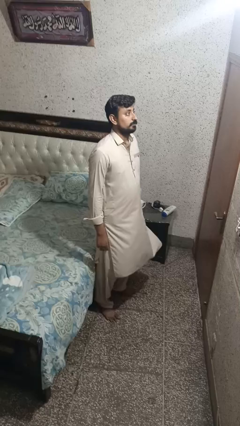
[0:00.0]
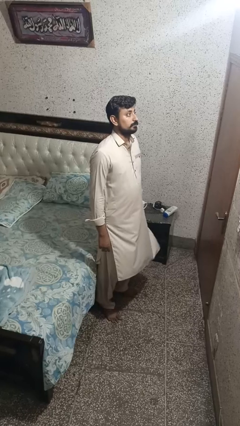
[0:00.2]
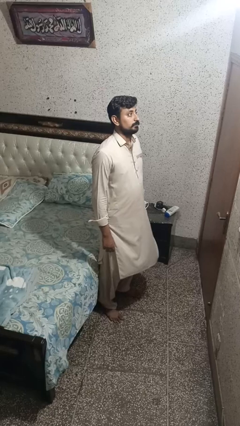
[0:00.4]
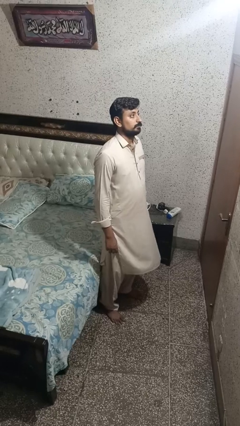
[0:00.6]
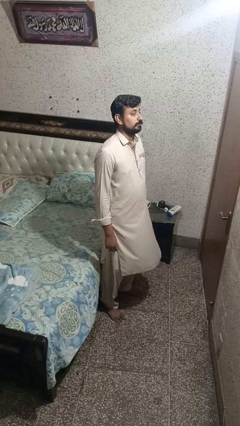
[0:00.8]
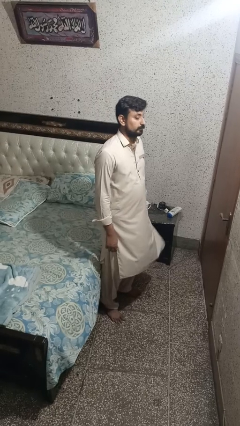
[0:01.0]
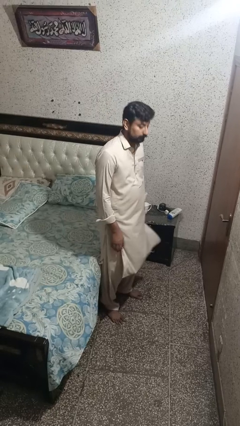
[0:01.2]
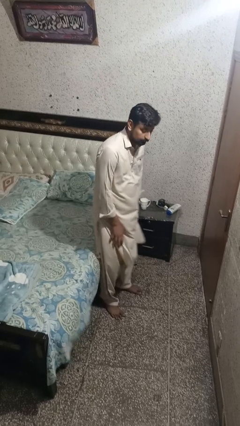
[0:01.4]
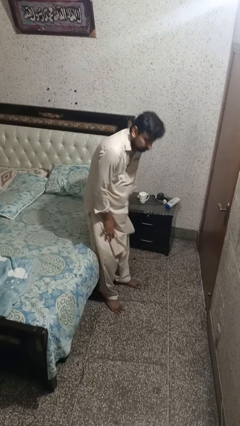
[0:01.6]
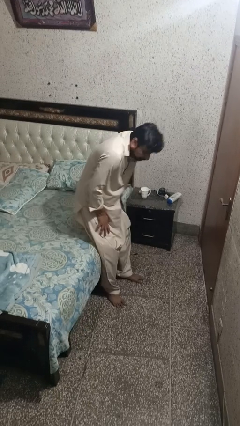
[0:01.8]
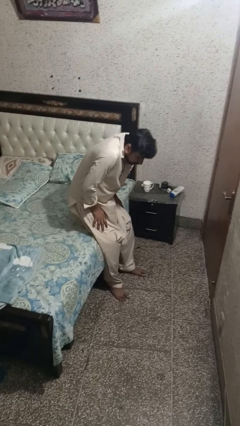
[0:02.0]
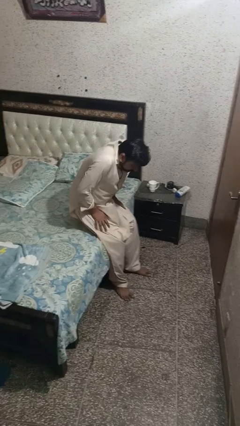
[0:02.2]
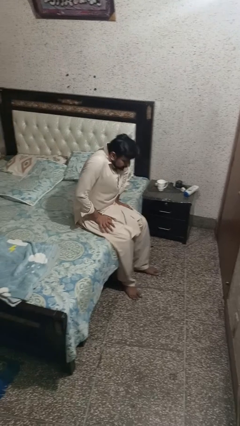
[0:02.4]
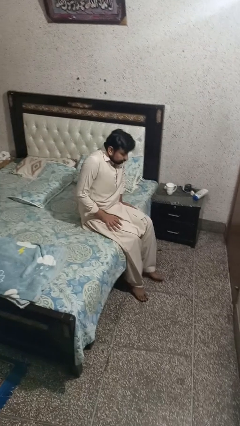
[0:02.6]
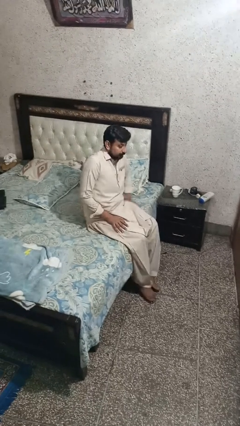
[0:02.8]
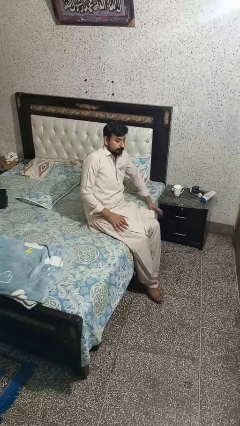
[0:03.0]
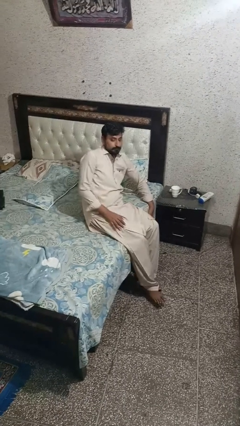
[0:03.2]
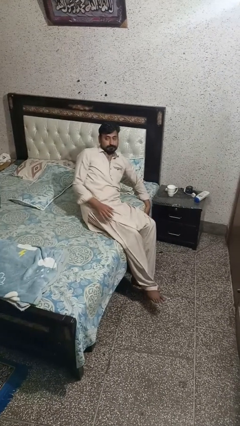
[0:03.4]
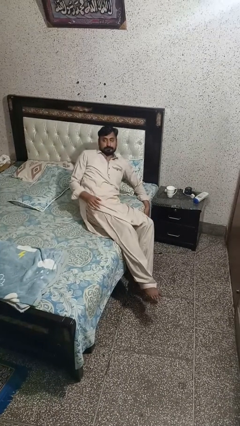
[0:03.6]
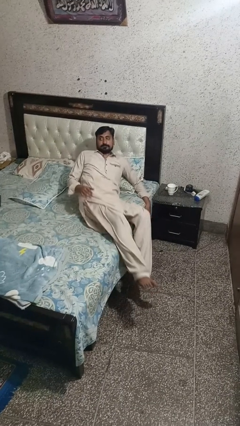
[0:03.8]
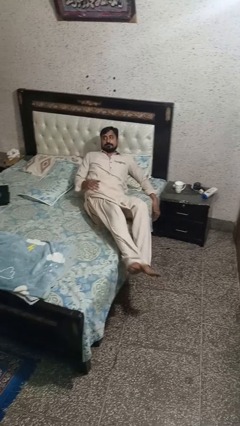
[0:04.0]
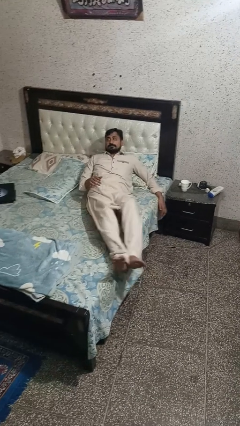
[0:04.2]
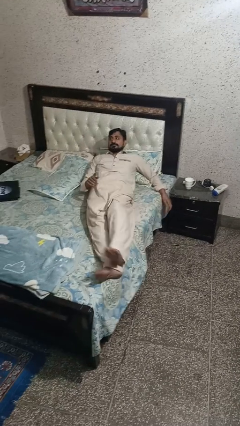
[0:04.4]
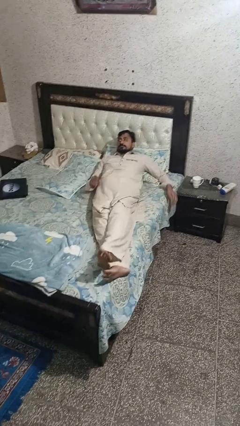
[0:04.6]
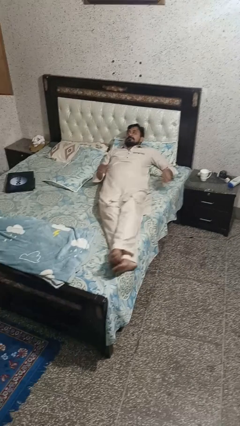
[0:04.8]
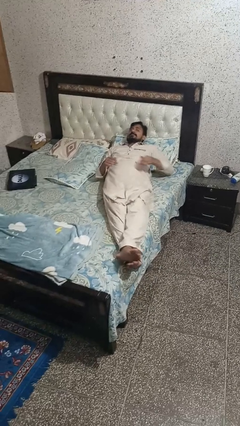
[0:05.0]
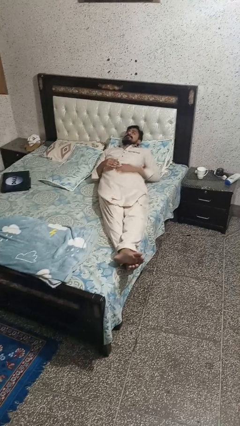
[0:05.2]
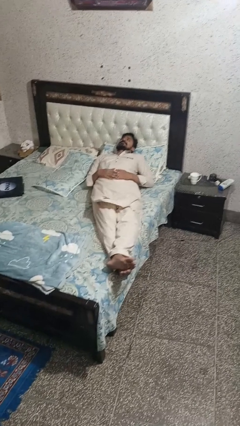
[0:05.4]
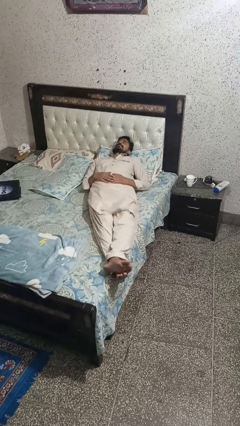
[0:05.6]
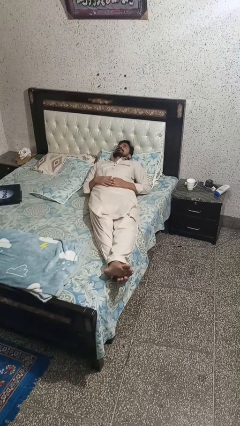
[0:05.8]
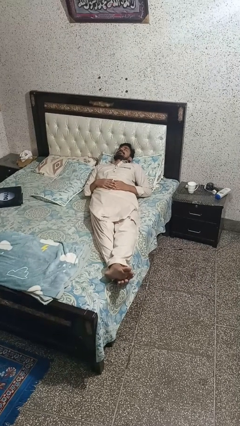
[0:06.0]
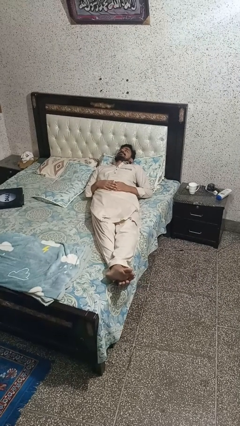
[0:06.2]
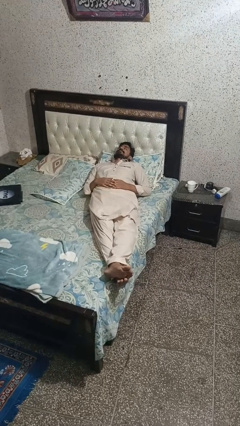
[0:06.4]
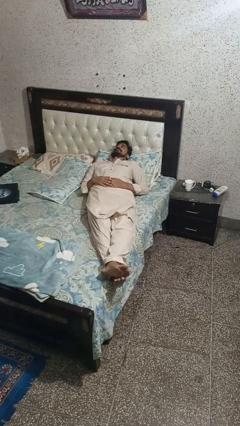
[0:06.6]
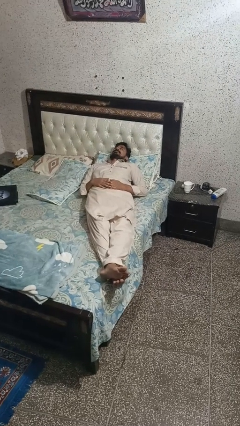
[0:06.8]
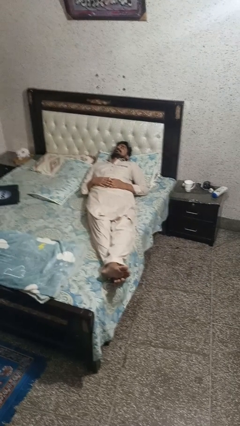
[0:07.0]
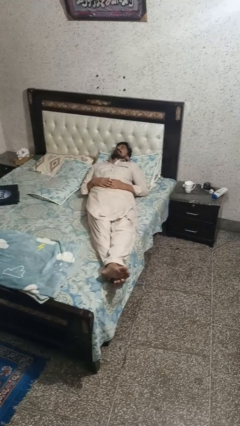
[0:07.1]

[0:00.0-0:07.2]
person lies down on bed

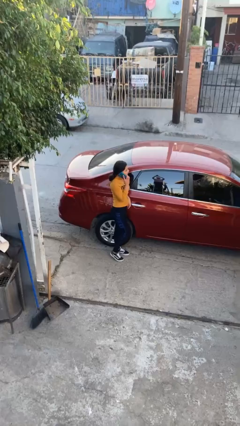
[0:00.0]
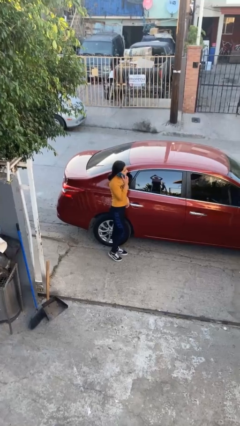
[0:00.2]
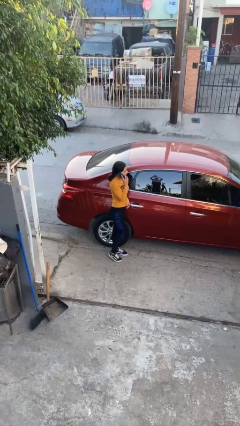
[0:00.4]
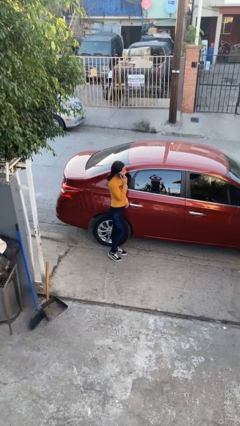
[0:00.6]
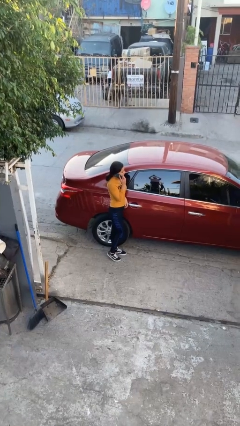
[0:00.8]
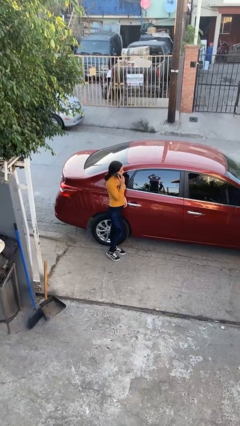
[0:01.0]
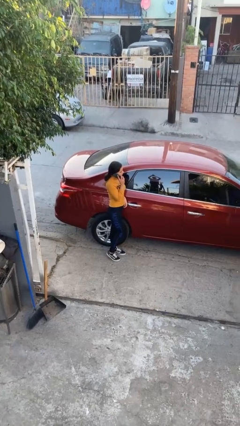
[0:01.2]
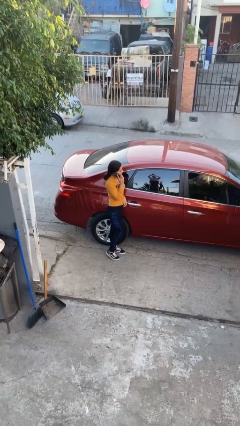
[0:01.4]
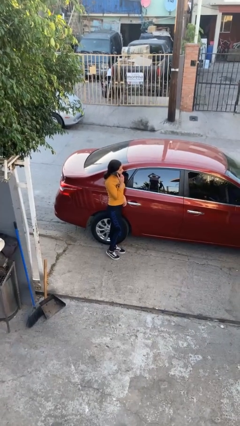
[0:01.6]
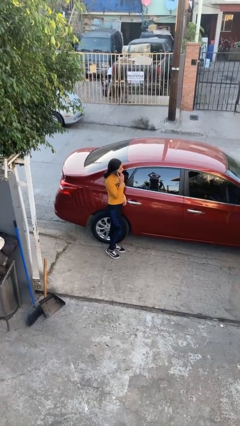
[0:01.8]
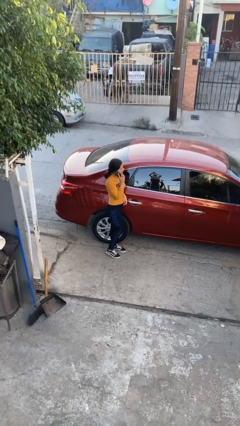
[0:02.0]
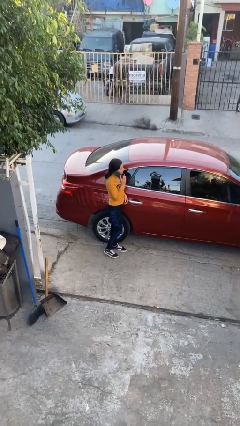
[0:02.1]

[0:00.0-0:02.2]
person leans against car

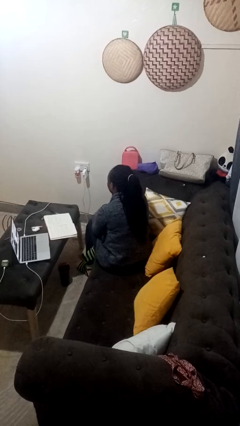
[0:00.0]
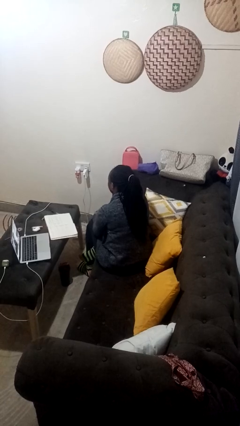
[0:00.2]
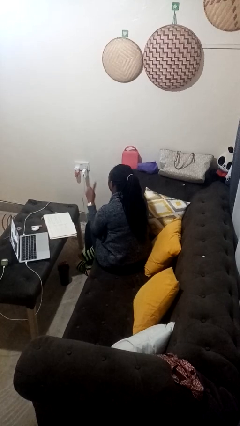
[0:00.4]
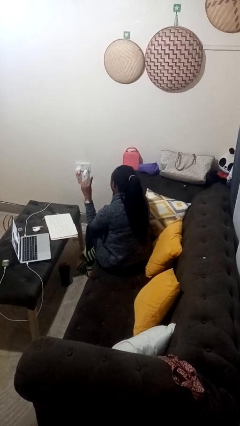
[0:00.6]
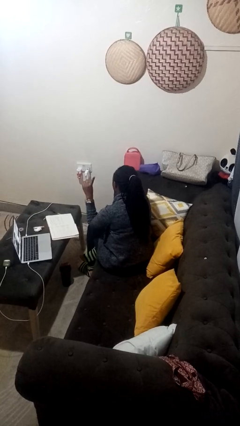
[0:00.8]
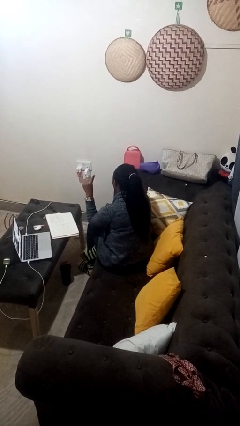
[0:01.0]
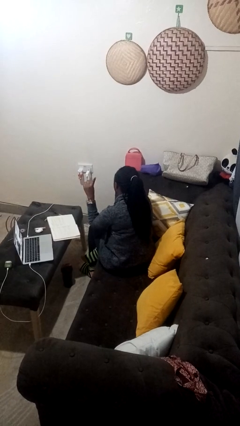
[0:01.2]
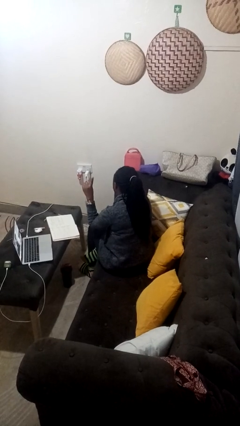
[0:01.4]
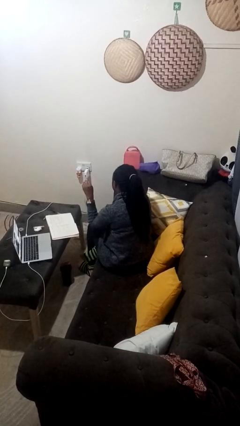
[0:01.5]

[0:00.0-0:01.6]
person gestures number one

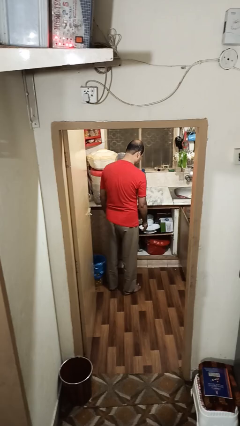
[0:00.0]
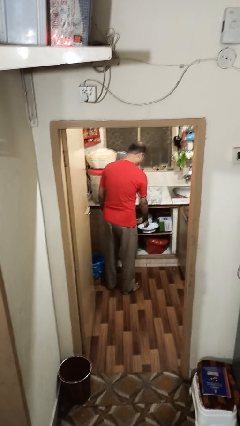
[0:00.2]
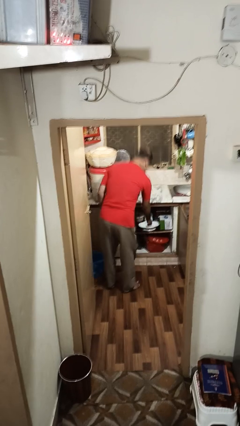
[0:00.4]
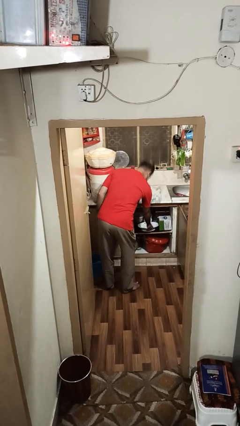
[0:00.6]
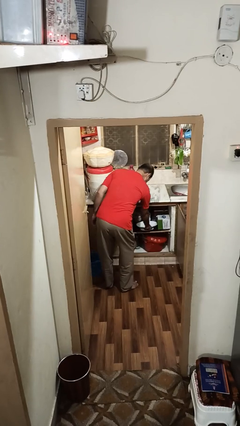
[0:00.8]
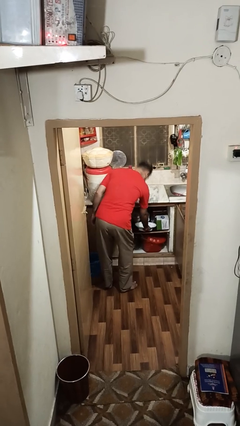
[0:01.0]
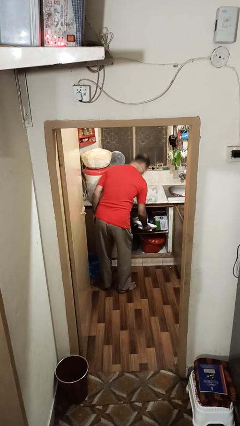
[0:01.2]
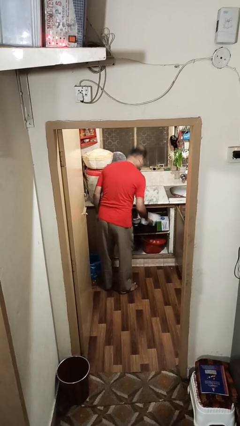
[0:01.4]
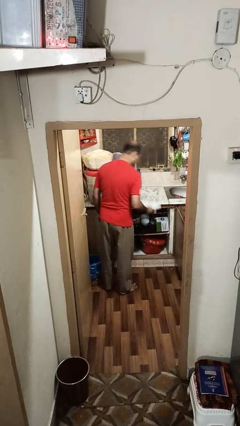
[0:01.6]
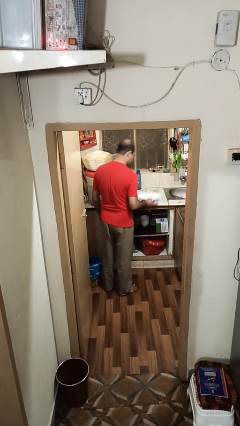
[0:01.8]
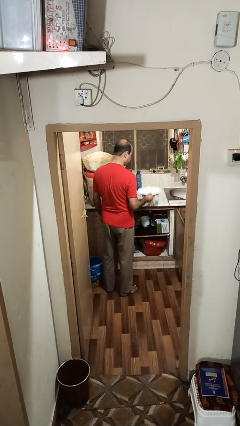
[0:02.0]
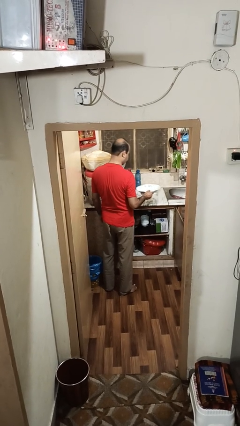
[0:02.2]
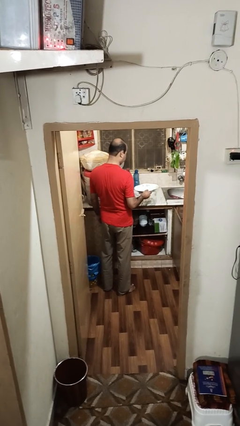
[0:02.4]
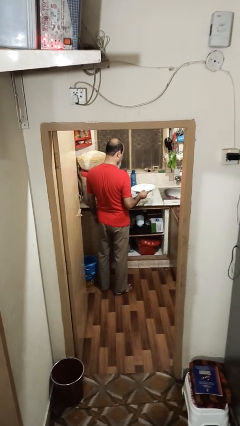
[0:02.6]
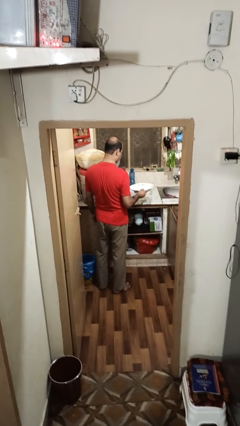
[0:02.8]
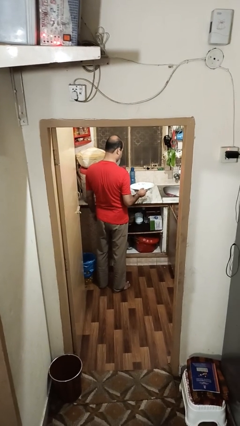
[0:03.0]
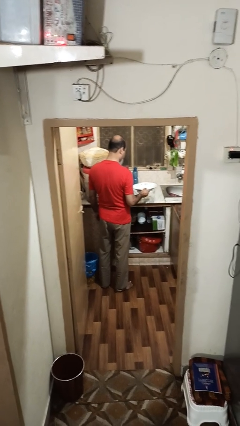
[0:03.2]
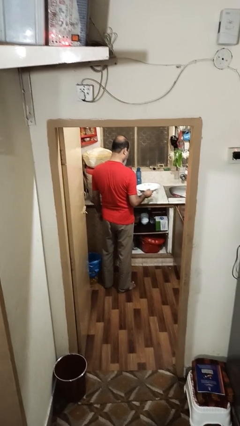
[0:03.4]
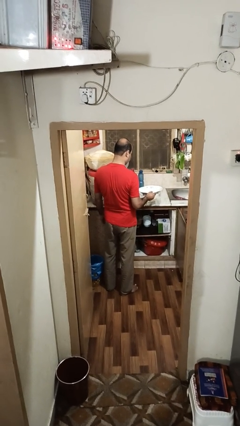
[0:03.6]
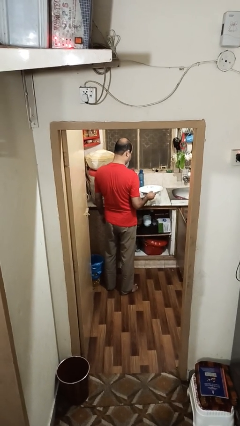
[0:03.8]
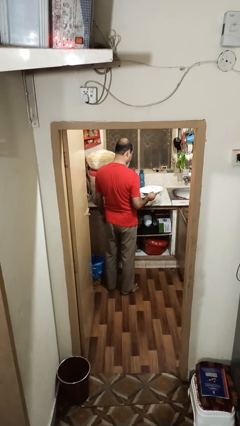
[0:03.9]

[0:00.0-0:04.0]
person picks up object from cabinet

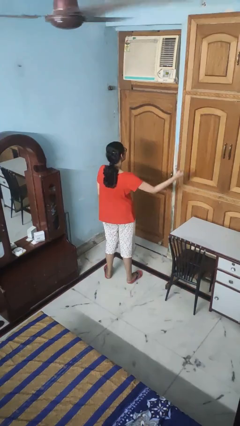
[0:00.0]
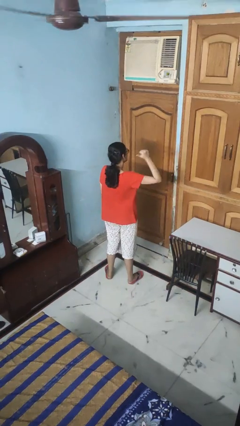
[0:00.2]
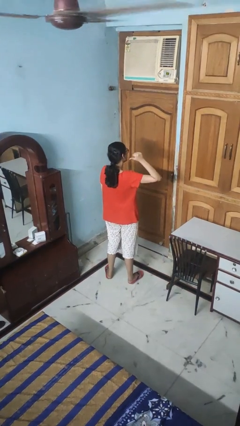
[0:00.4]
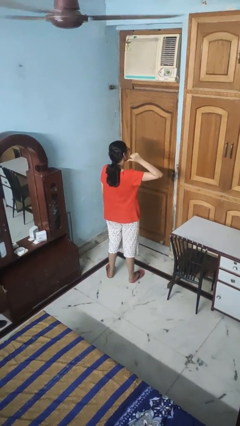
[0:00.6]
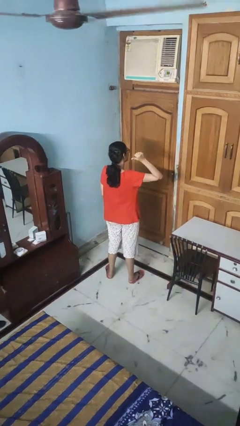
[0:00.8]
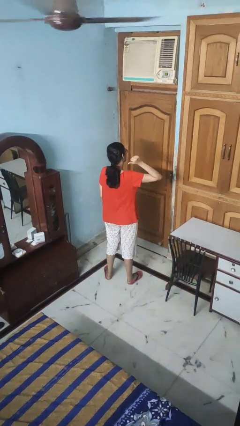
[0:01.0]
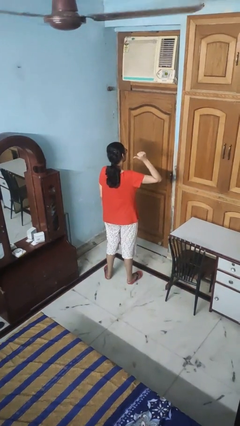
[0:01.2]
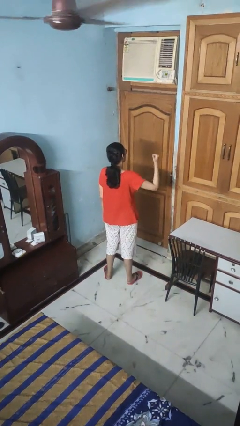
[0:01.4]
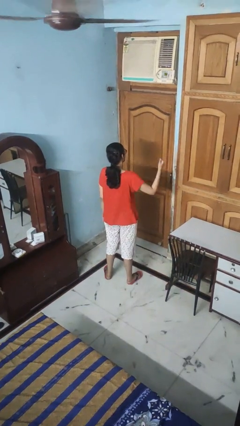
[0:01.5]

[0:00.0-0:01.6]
person gestures behind me

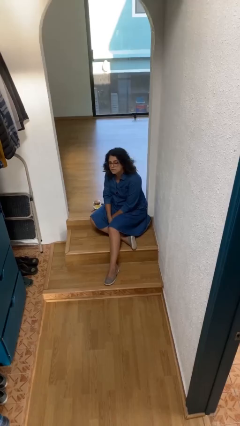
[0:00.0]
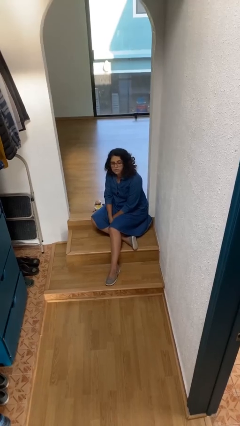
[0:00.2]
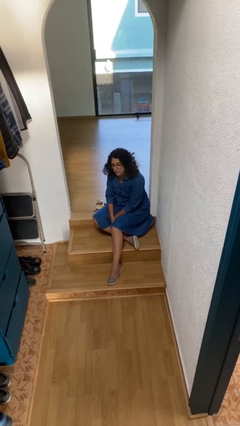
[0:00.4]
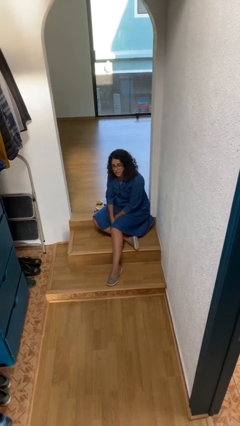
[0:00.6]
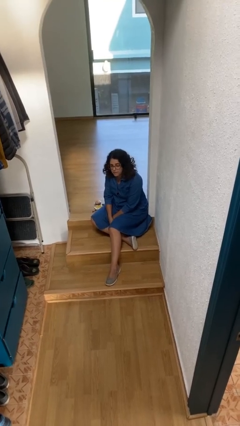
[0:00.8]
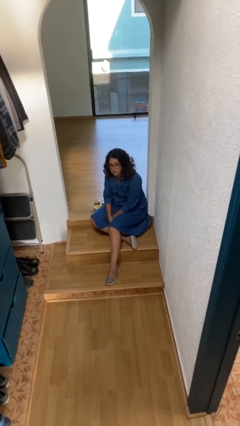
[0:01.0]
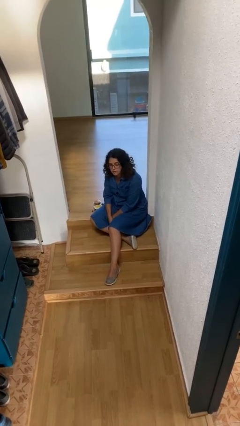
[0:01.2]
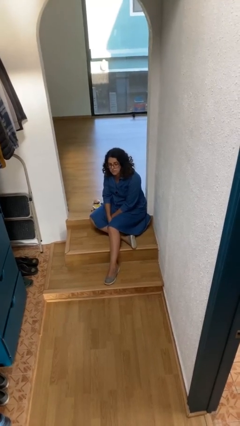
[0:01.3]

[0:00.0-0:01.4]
person shakes head
